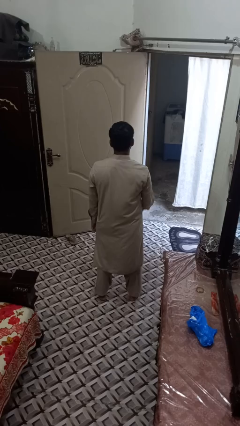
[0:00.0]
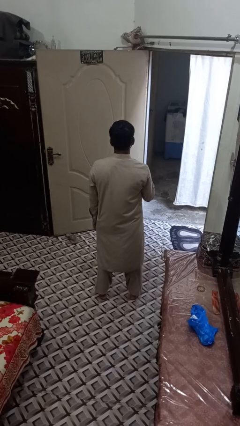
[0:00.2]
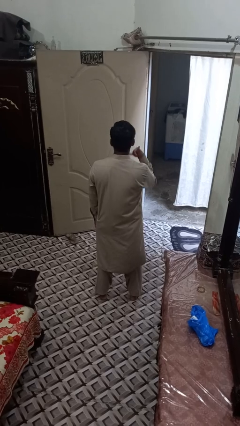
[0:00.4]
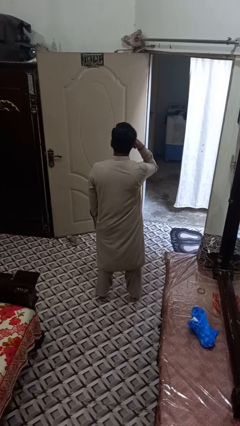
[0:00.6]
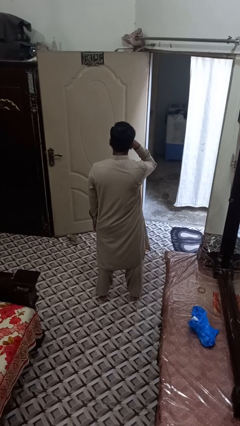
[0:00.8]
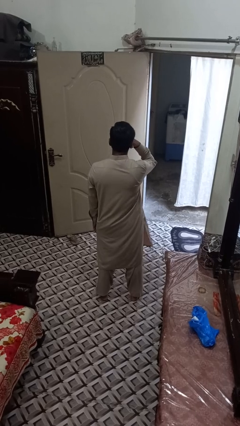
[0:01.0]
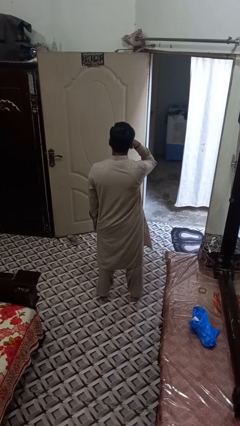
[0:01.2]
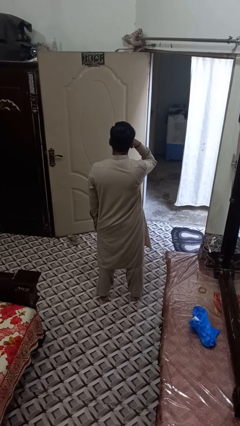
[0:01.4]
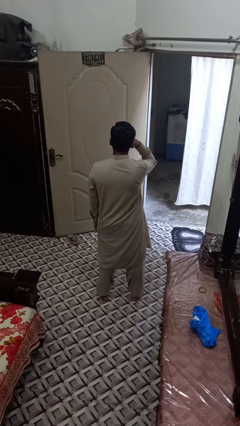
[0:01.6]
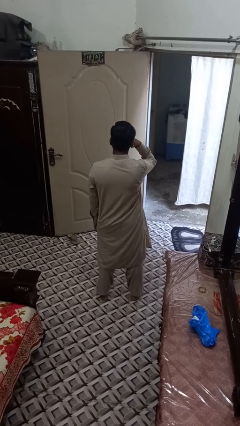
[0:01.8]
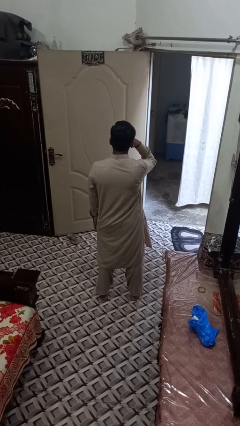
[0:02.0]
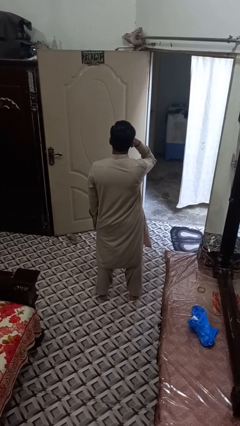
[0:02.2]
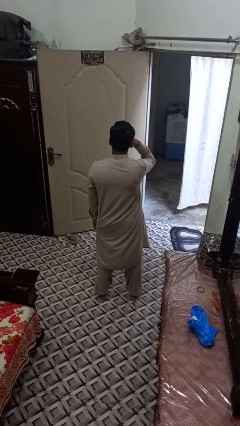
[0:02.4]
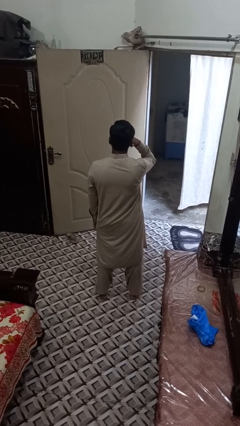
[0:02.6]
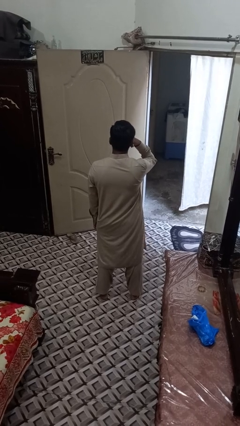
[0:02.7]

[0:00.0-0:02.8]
person gestures call me

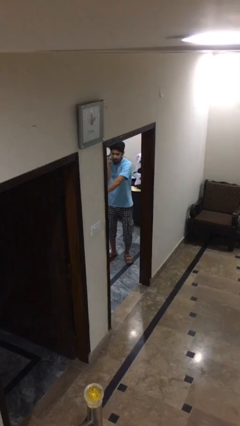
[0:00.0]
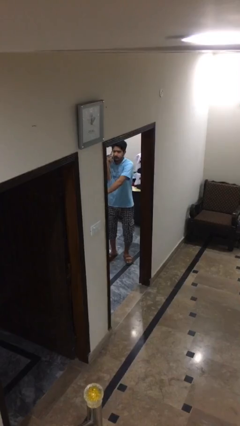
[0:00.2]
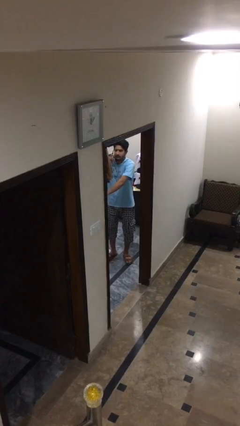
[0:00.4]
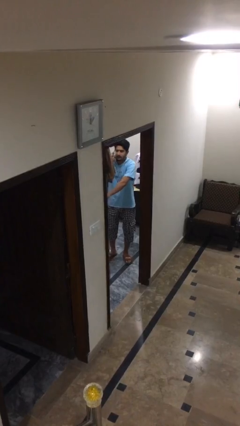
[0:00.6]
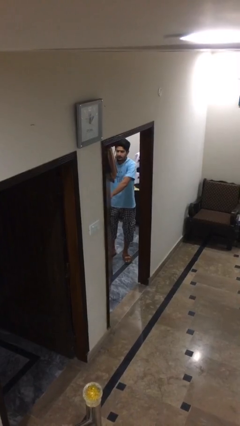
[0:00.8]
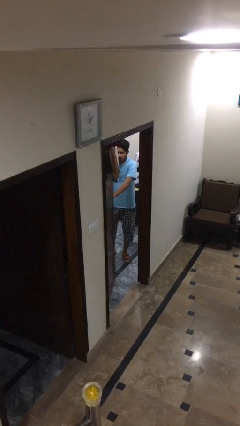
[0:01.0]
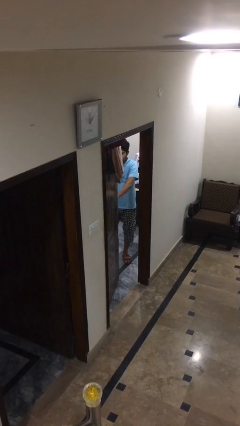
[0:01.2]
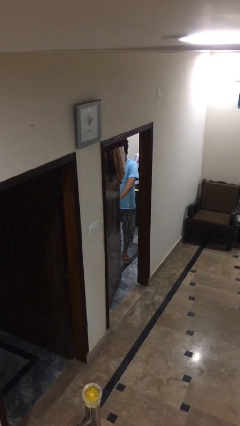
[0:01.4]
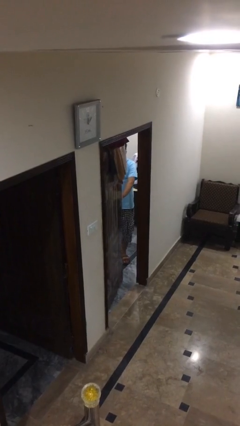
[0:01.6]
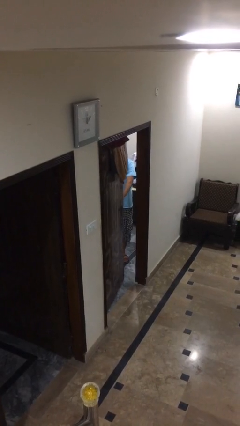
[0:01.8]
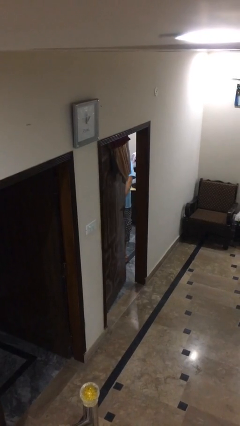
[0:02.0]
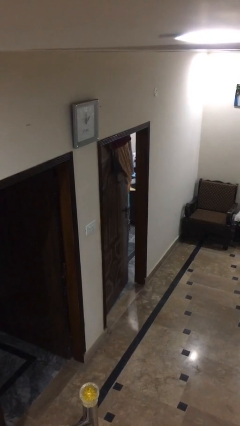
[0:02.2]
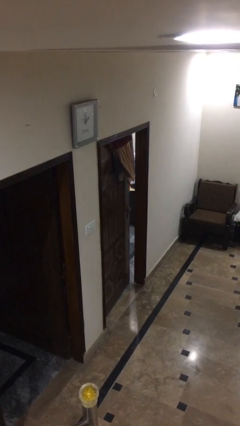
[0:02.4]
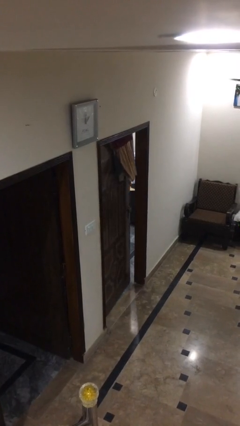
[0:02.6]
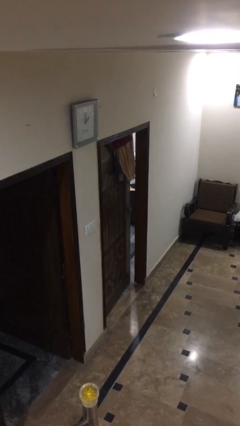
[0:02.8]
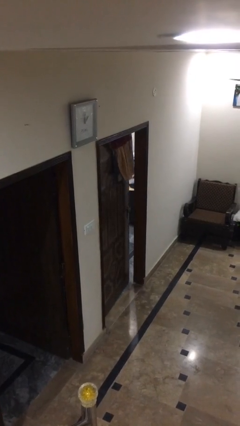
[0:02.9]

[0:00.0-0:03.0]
person closes facility door

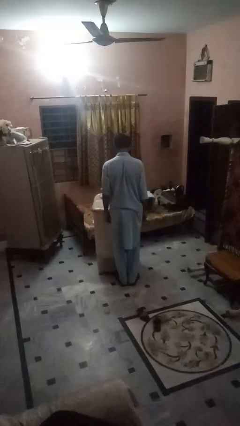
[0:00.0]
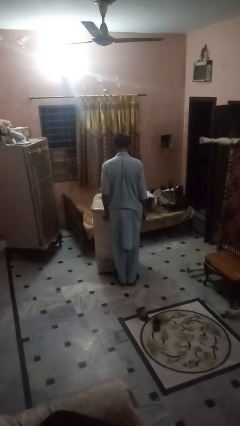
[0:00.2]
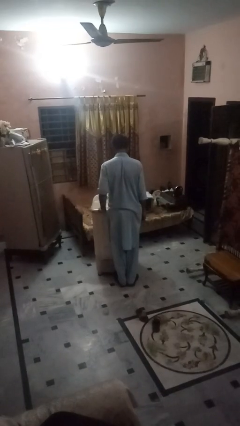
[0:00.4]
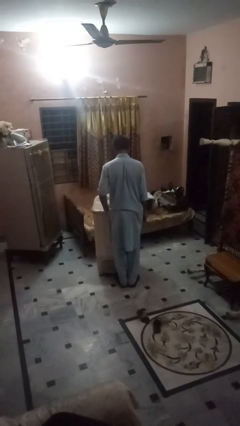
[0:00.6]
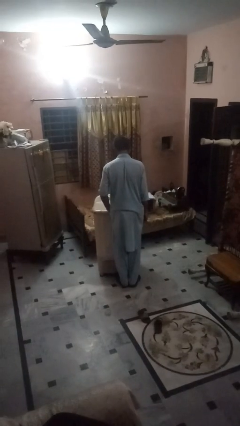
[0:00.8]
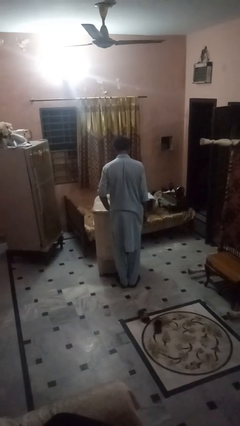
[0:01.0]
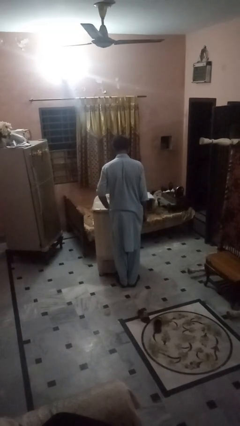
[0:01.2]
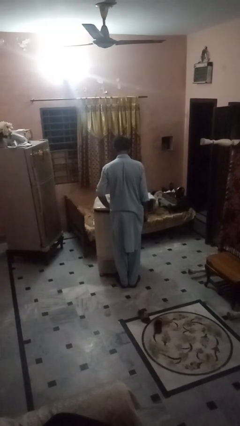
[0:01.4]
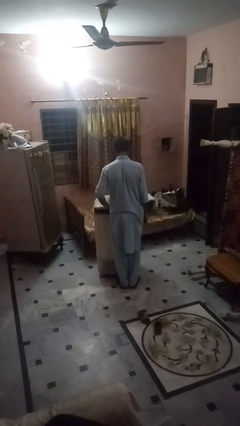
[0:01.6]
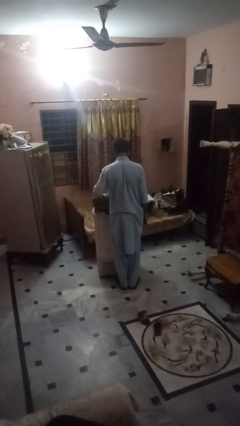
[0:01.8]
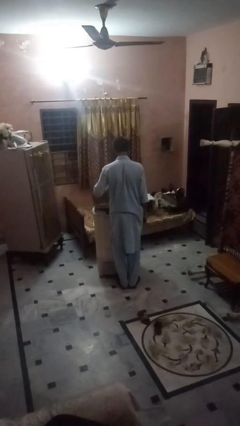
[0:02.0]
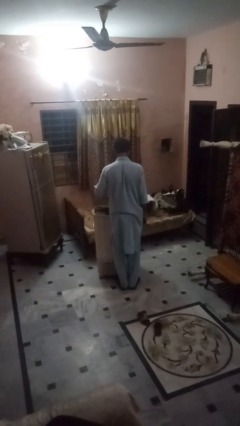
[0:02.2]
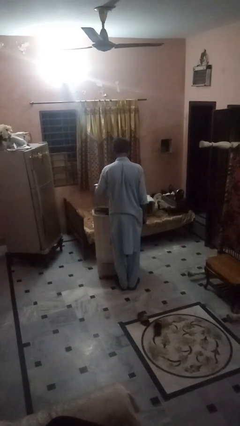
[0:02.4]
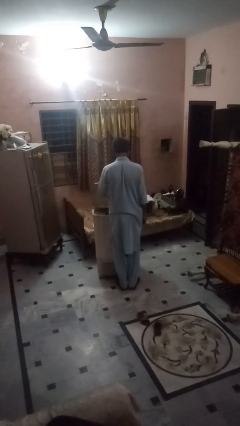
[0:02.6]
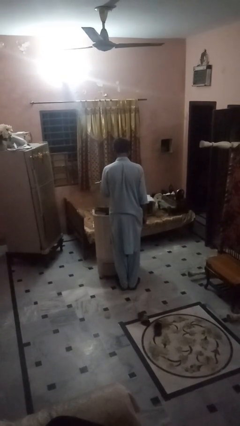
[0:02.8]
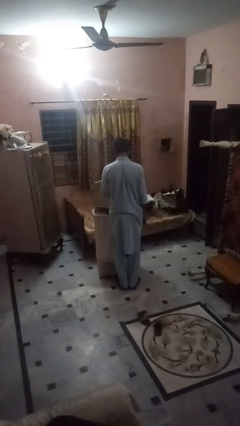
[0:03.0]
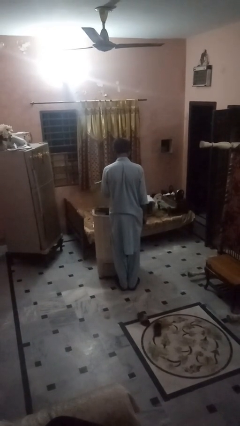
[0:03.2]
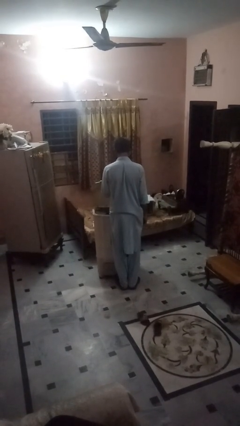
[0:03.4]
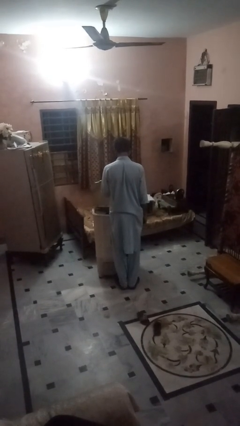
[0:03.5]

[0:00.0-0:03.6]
person opens clothes washer

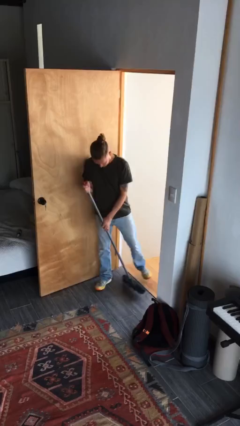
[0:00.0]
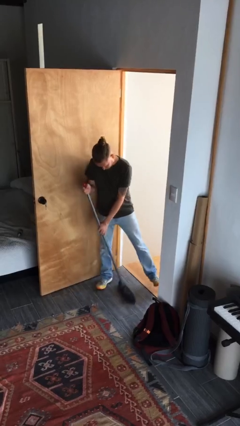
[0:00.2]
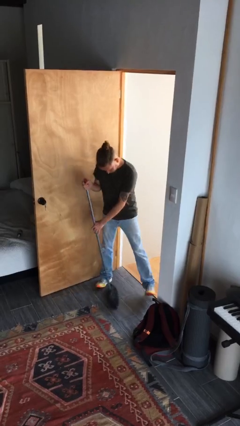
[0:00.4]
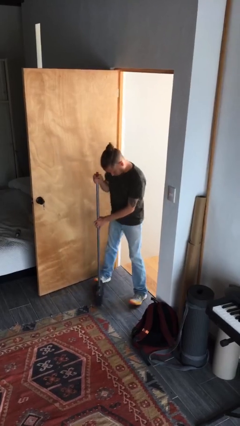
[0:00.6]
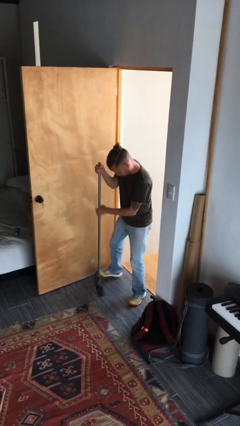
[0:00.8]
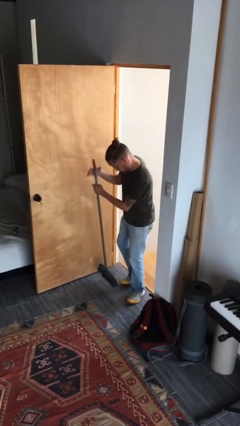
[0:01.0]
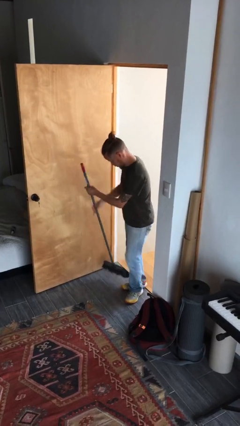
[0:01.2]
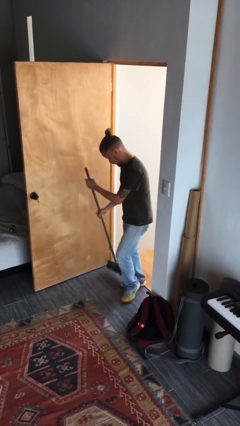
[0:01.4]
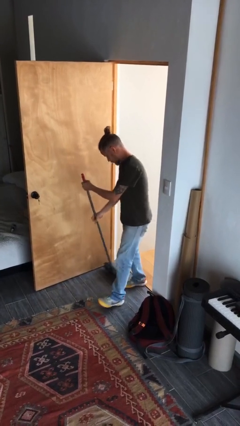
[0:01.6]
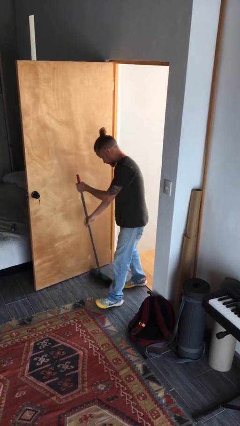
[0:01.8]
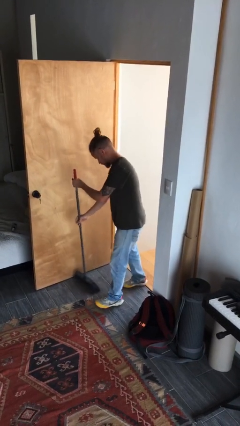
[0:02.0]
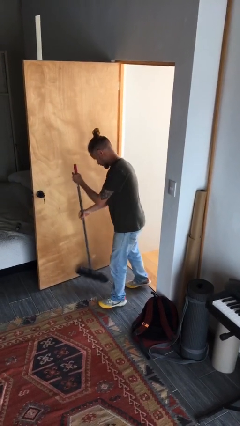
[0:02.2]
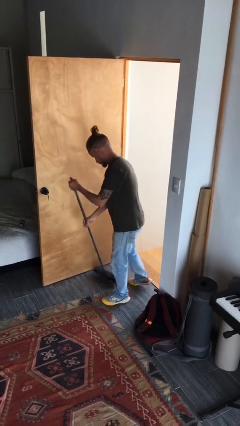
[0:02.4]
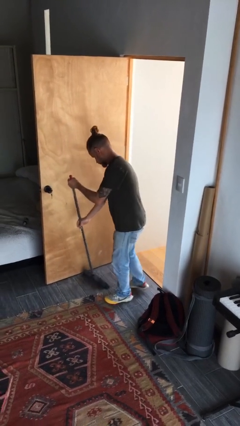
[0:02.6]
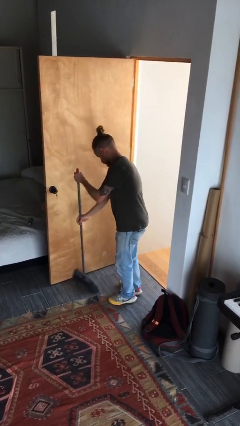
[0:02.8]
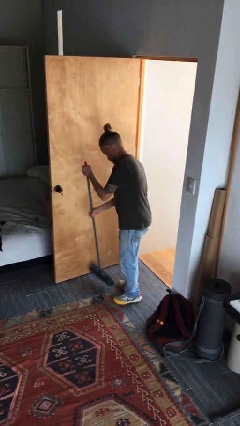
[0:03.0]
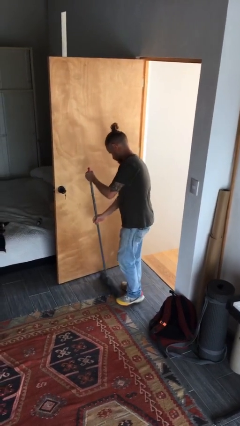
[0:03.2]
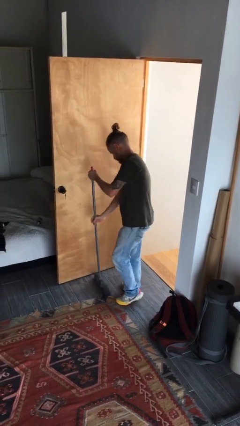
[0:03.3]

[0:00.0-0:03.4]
person sweeps floor

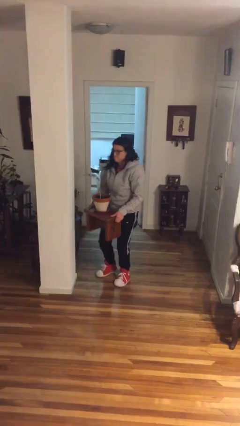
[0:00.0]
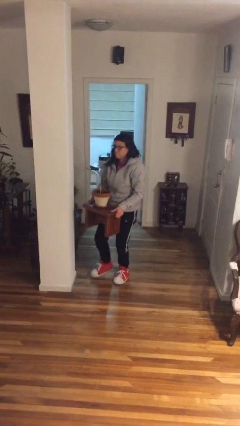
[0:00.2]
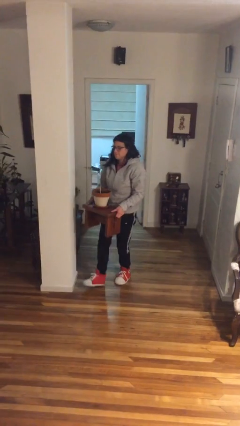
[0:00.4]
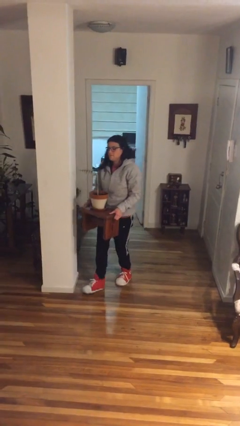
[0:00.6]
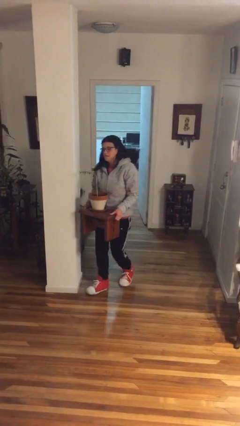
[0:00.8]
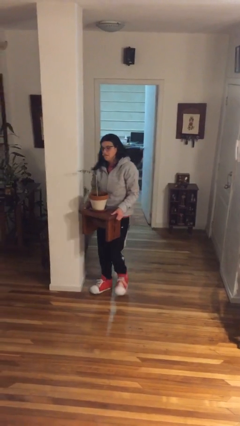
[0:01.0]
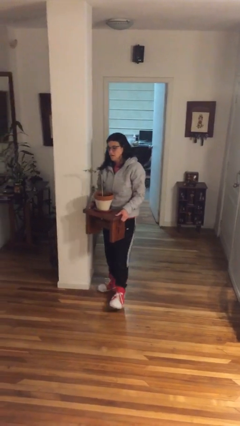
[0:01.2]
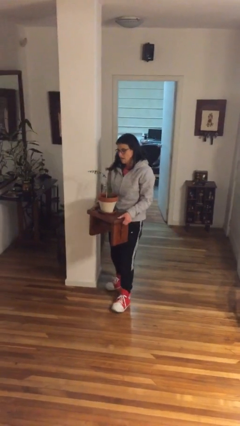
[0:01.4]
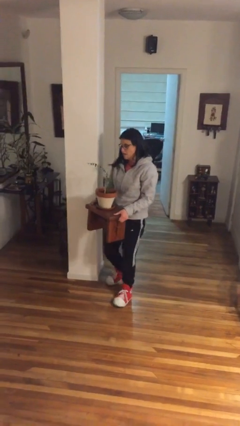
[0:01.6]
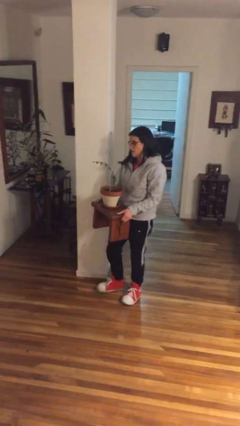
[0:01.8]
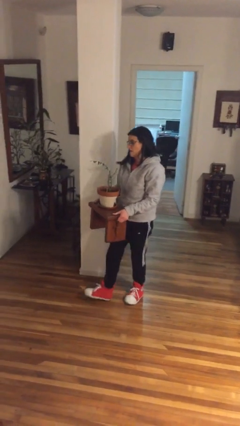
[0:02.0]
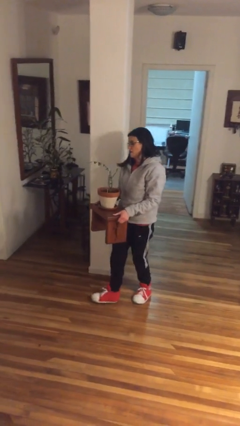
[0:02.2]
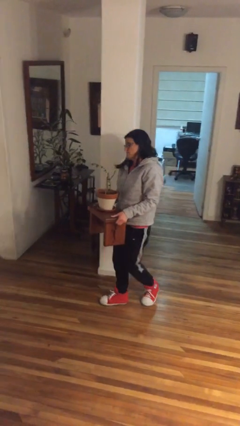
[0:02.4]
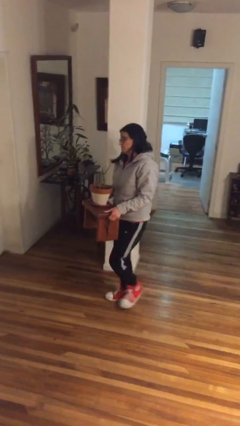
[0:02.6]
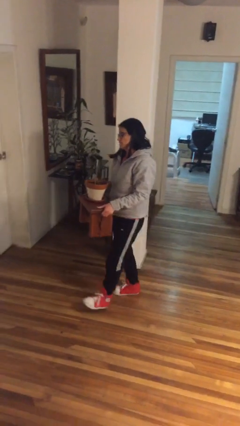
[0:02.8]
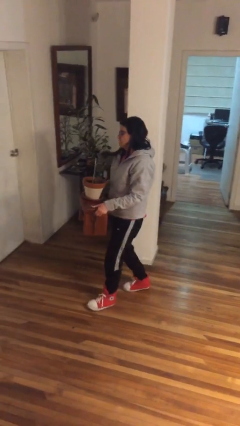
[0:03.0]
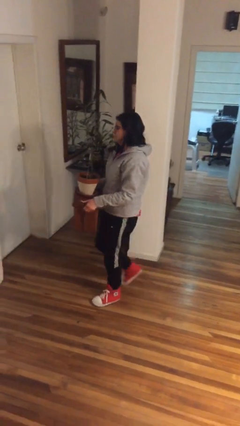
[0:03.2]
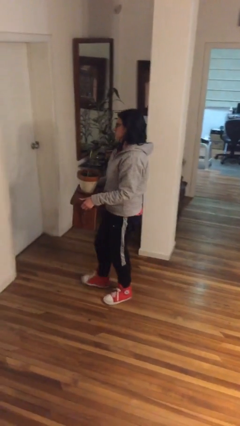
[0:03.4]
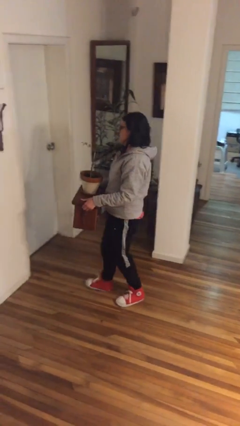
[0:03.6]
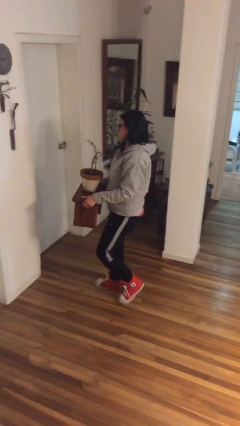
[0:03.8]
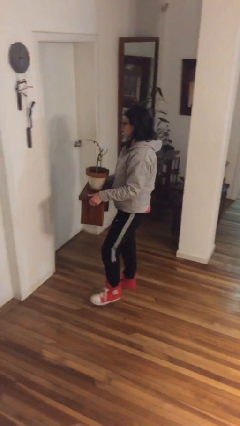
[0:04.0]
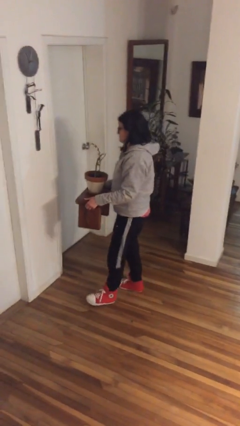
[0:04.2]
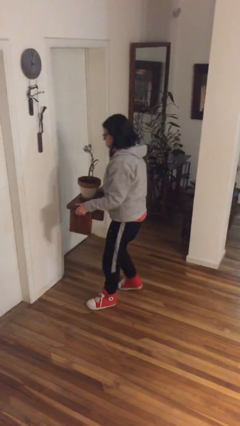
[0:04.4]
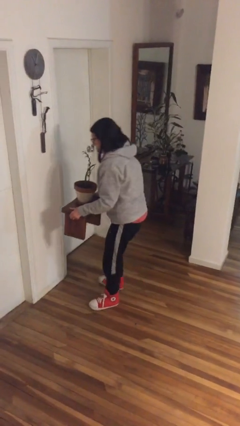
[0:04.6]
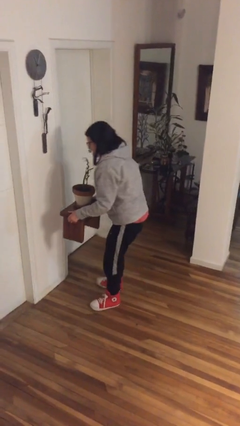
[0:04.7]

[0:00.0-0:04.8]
person carries heavy object
